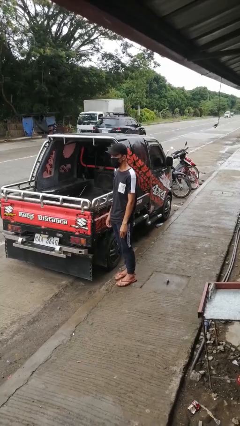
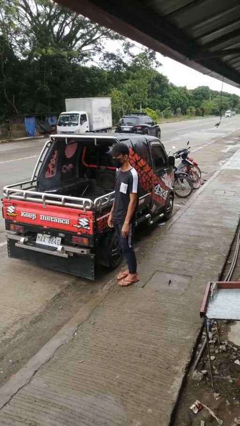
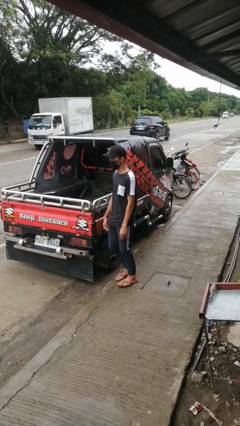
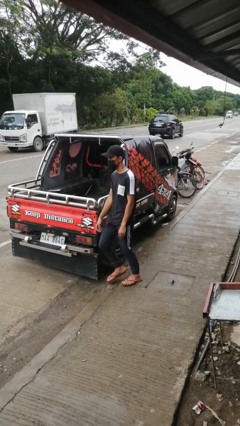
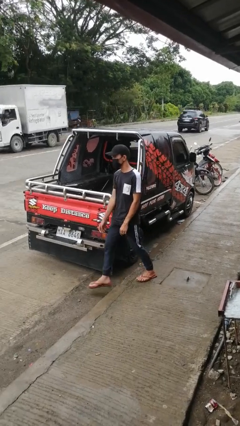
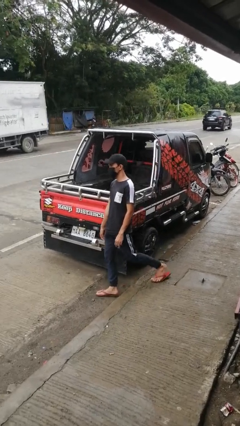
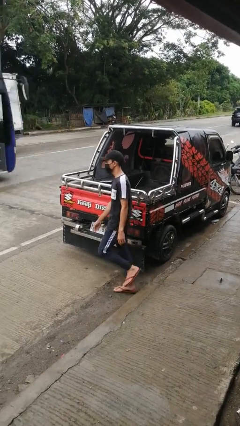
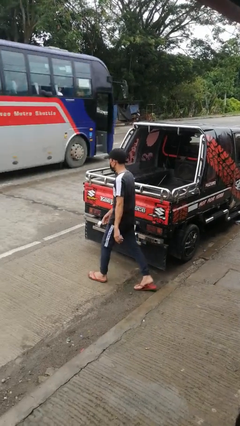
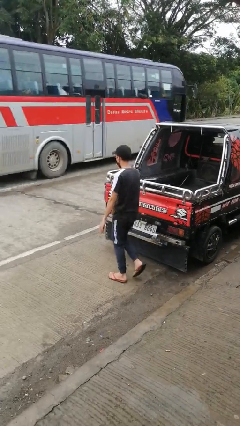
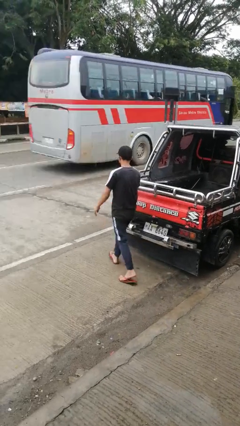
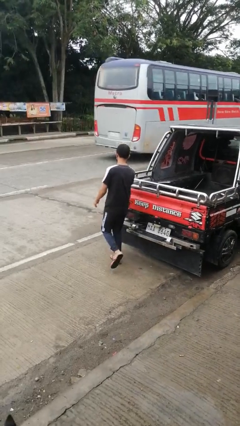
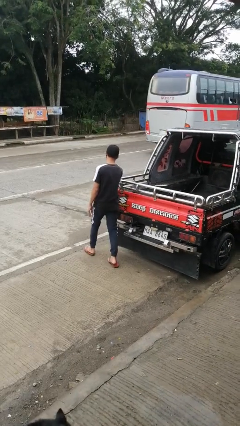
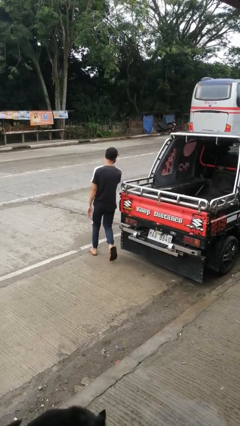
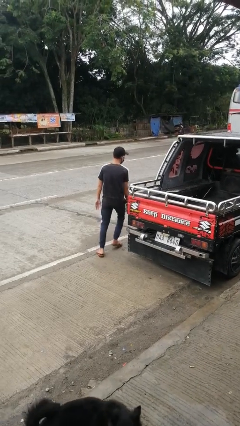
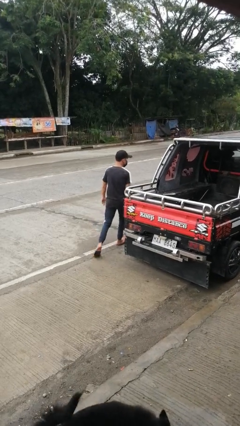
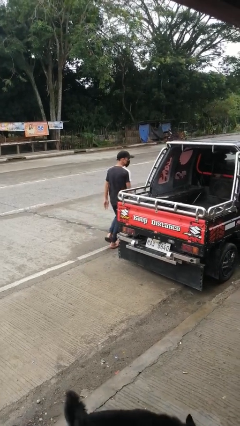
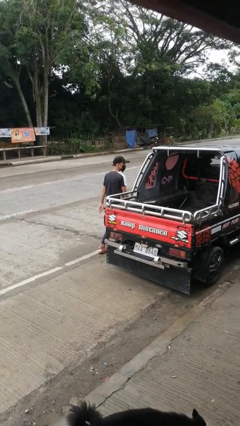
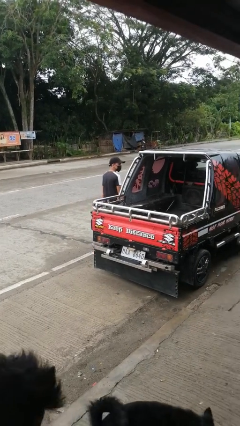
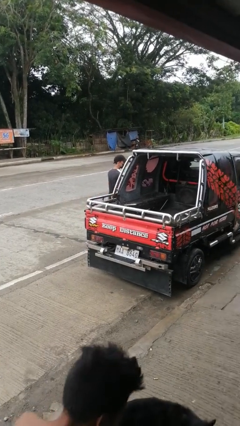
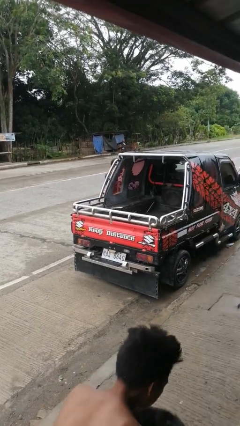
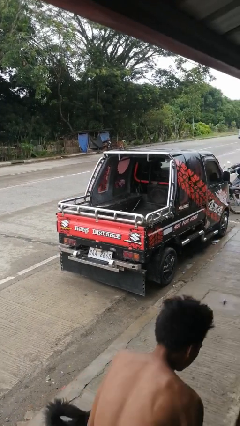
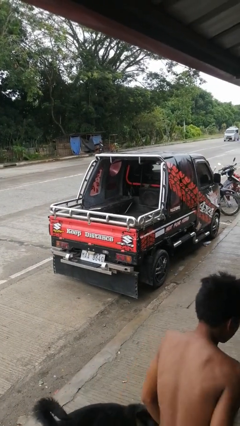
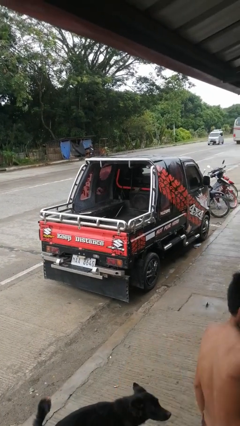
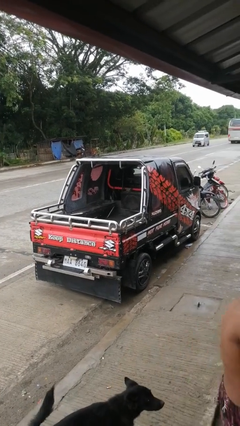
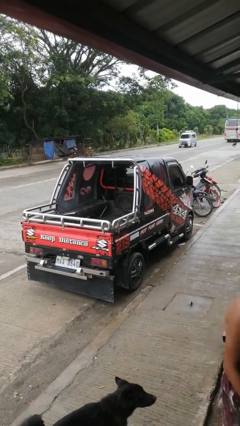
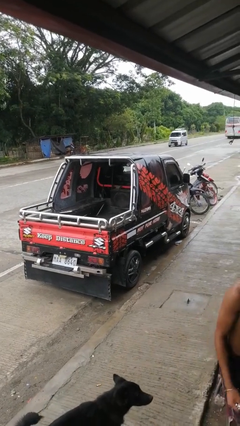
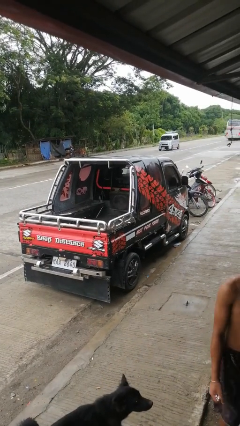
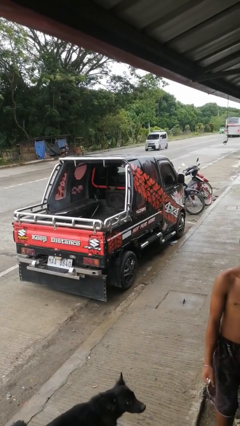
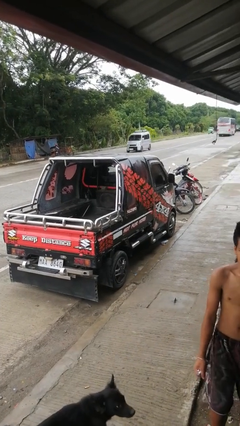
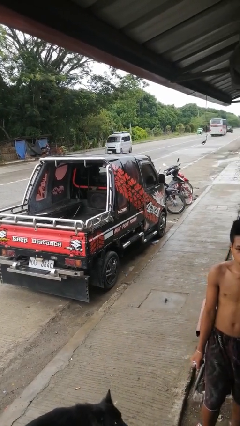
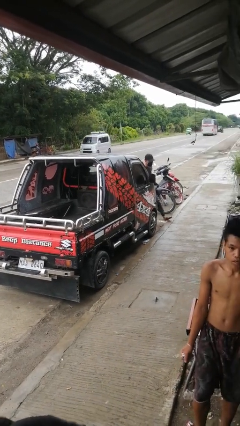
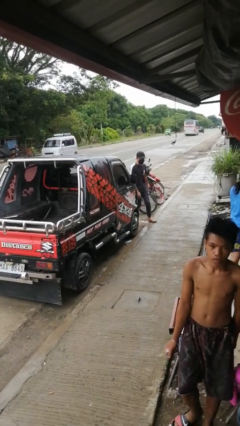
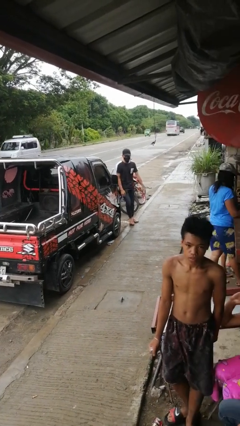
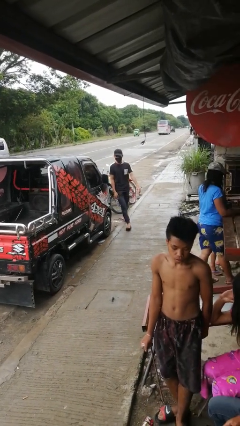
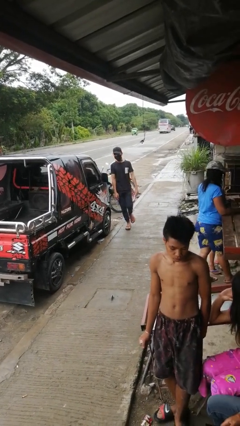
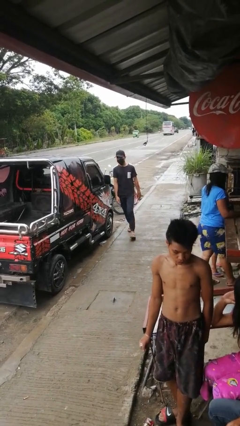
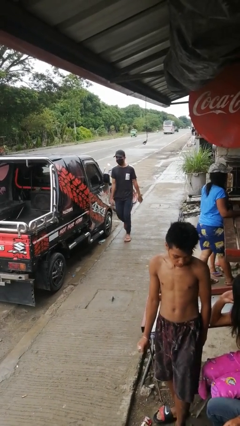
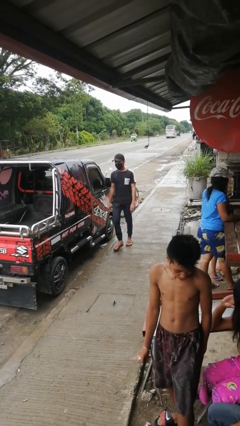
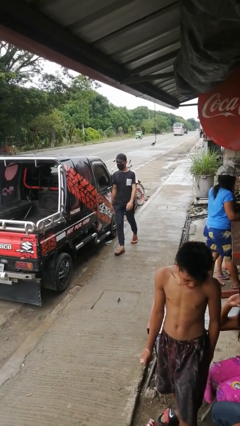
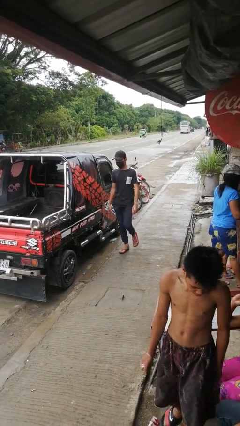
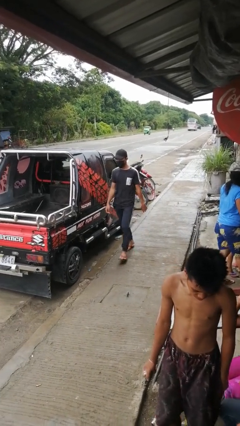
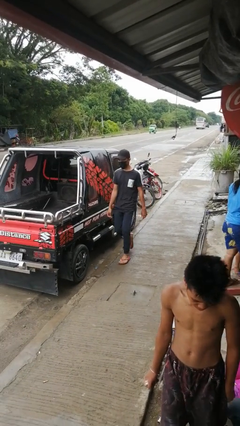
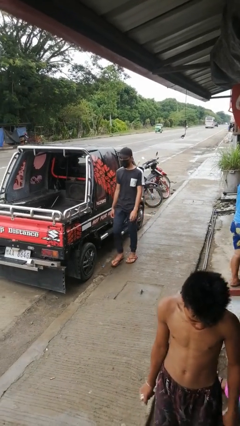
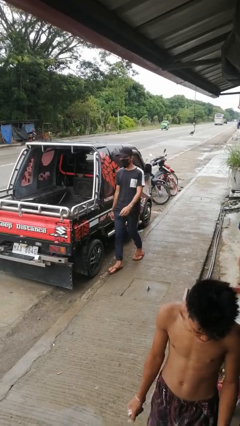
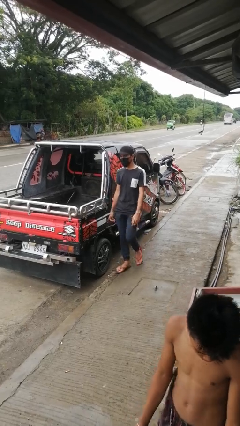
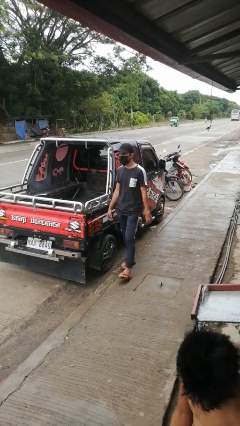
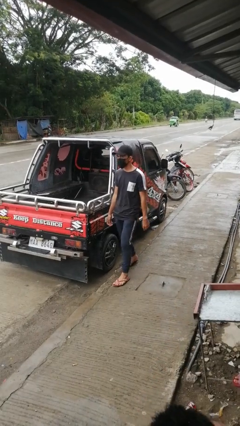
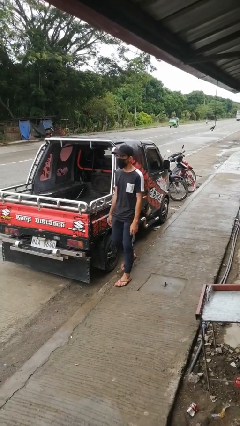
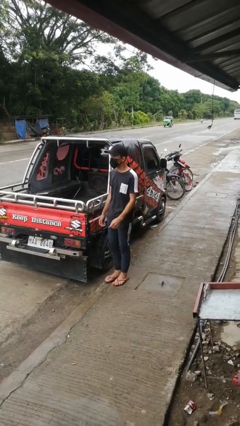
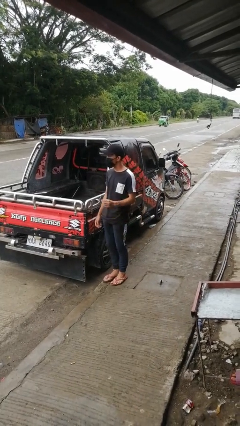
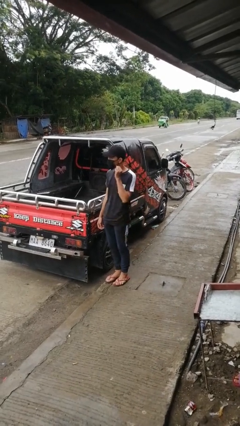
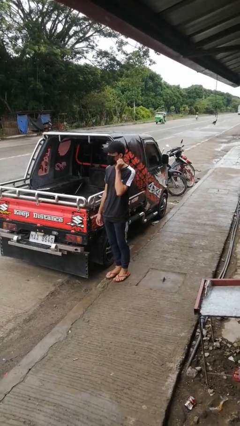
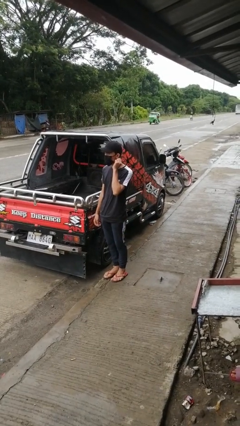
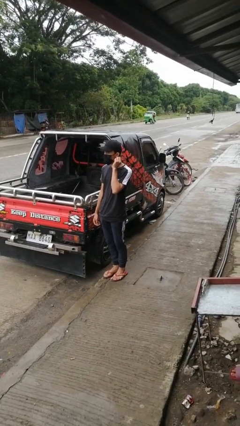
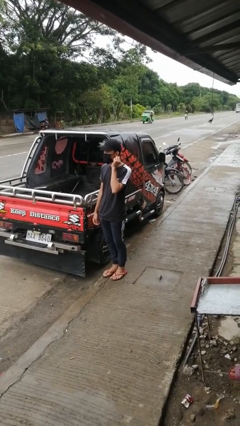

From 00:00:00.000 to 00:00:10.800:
person walks around car

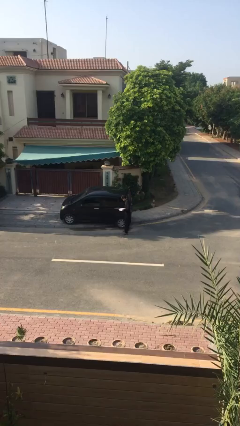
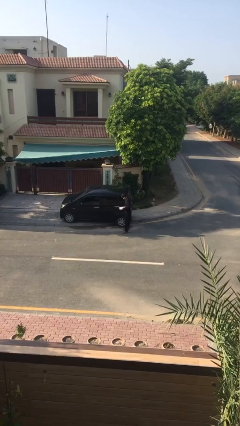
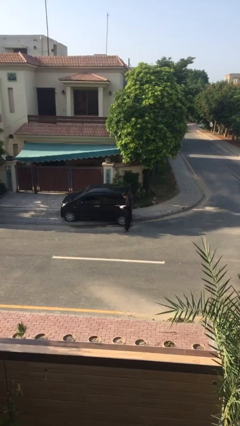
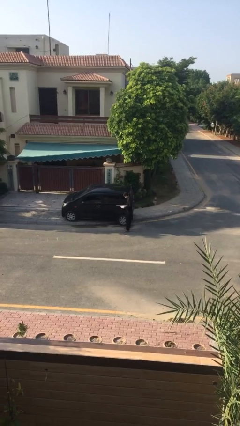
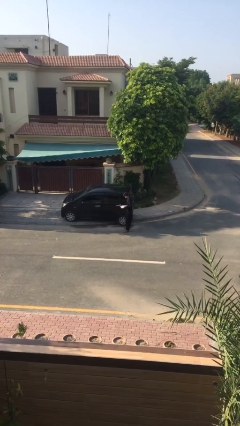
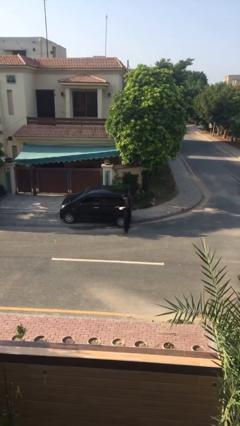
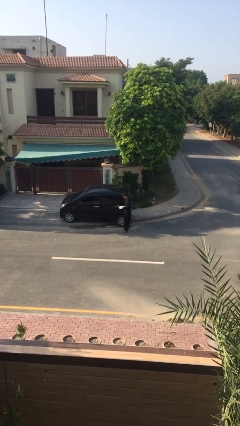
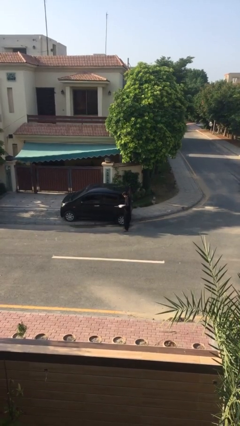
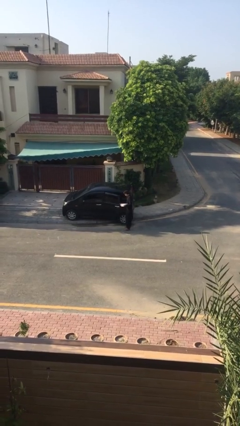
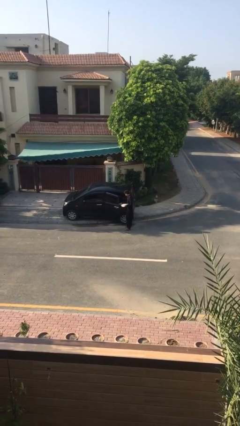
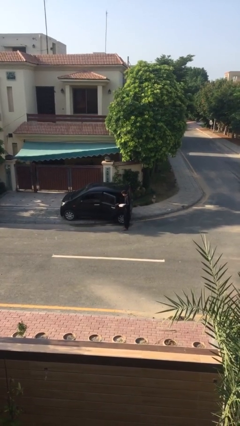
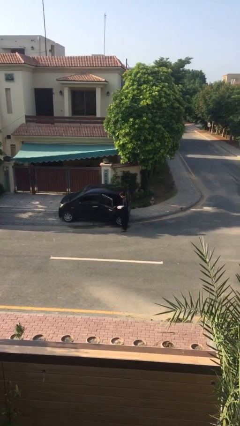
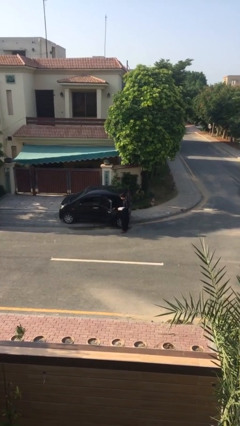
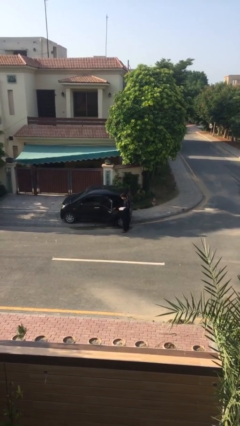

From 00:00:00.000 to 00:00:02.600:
person opens car door

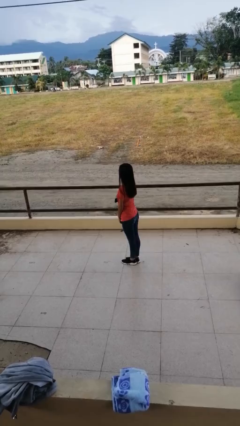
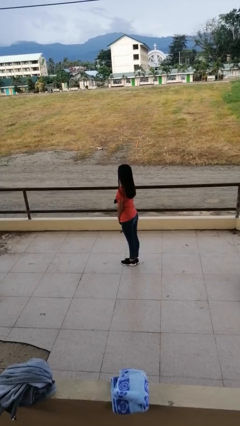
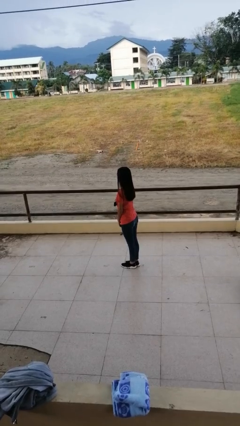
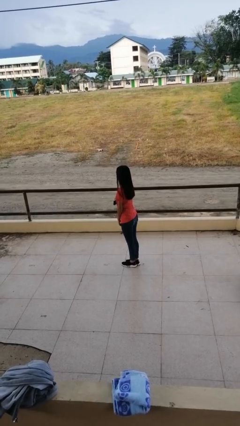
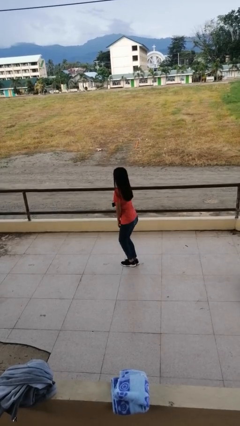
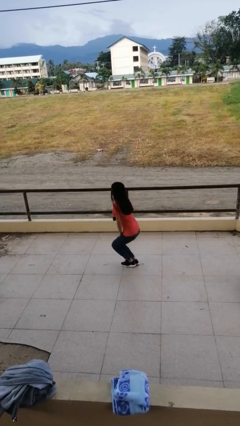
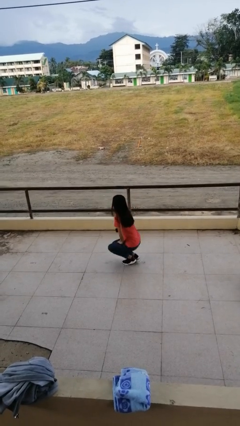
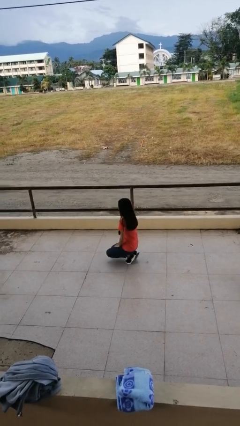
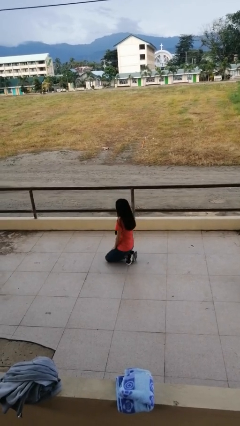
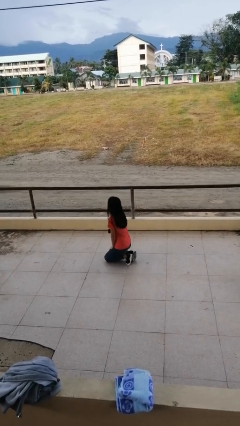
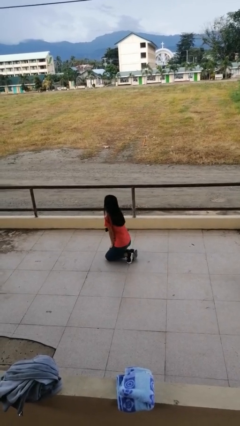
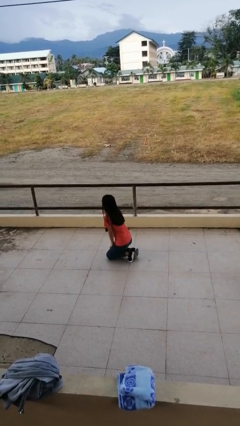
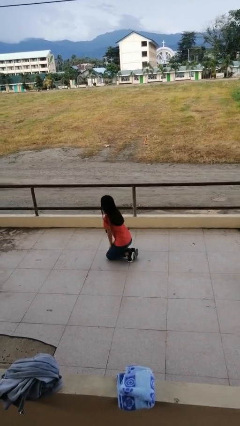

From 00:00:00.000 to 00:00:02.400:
person kneels

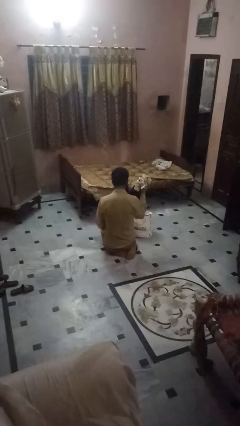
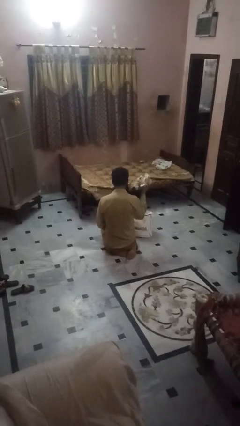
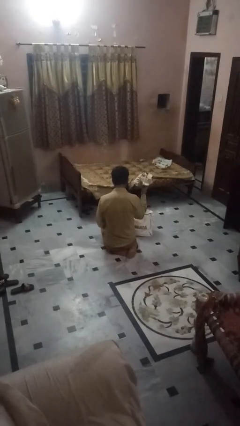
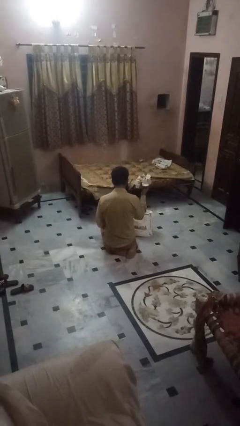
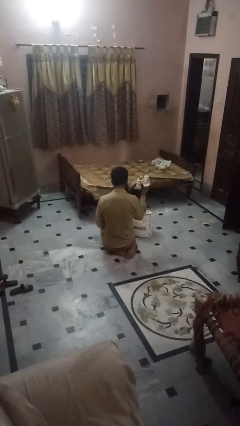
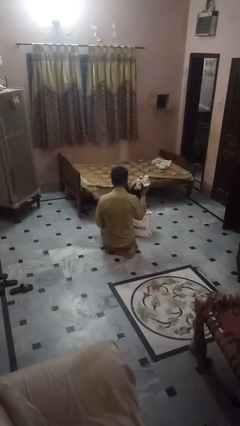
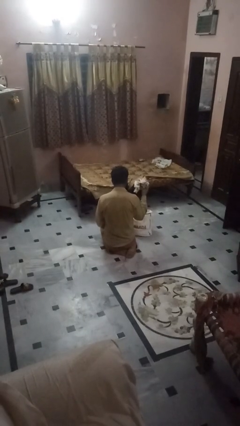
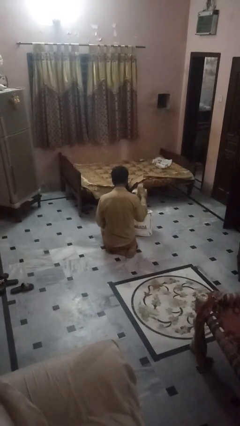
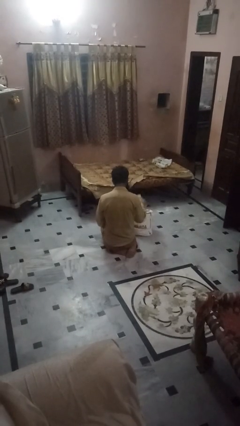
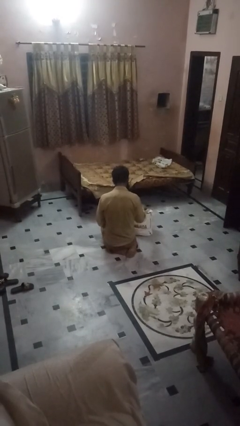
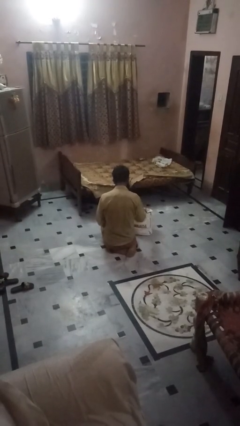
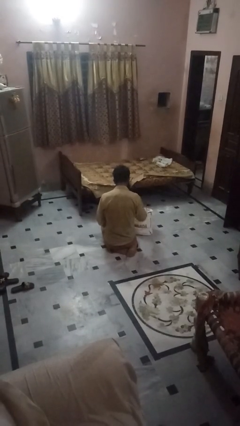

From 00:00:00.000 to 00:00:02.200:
person puts object into bag
